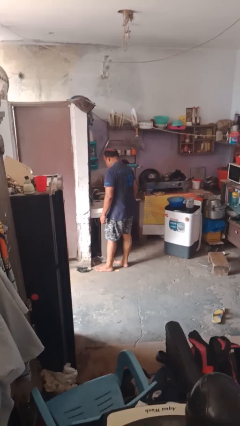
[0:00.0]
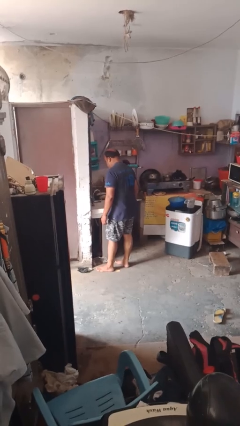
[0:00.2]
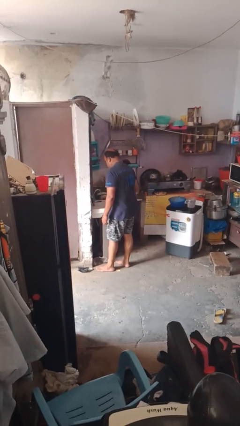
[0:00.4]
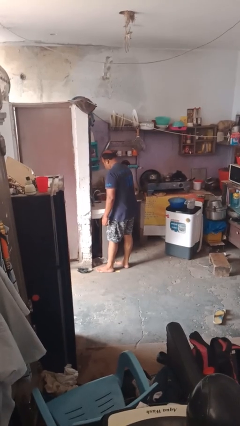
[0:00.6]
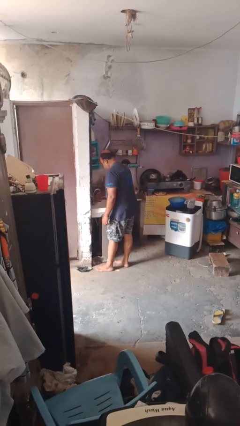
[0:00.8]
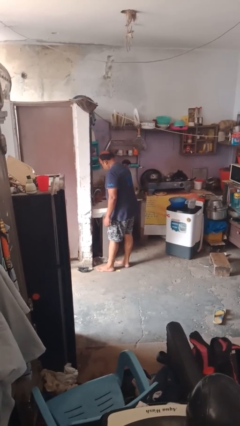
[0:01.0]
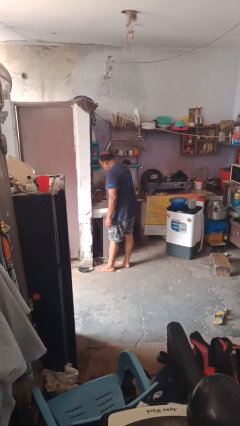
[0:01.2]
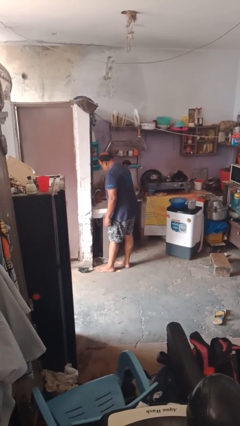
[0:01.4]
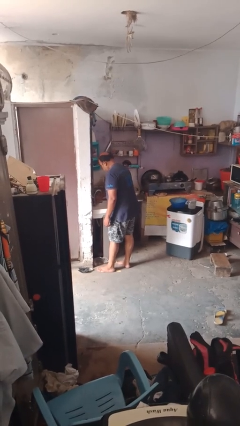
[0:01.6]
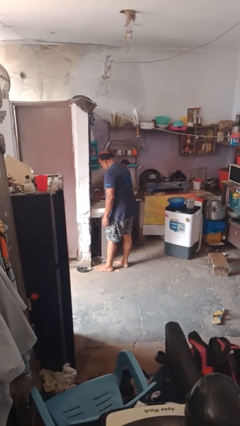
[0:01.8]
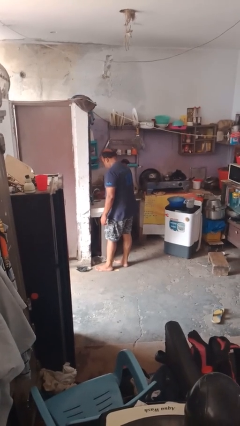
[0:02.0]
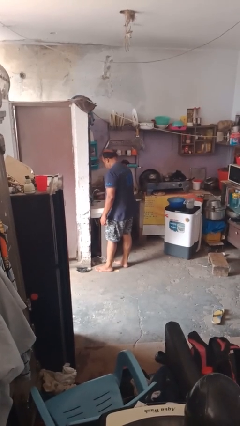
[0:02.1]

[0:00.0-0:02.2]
person turns off faucet

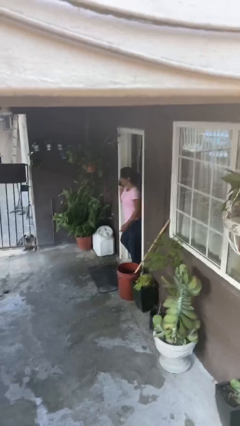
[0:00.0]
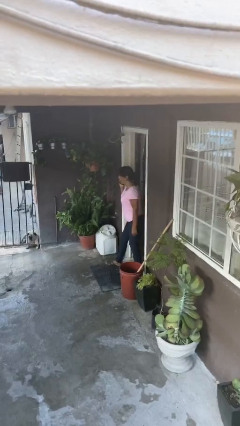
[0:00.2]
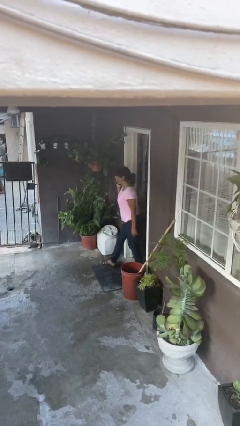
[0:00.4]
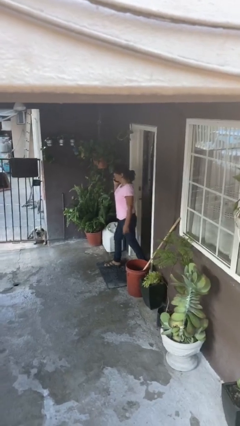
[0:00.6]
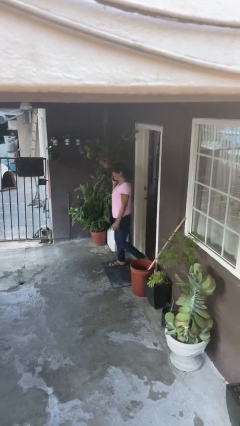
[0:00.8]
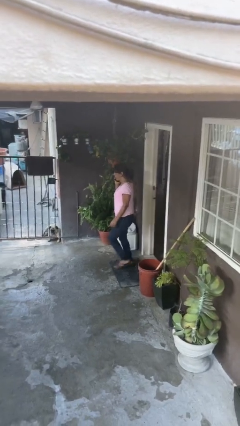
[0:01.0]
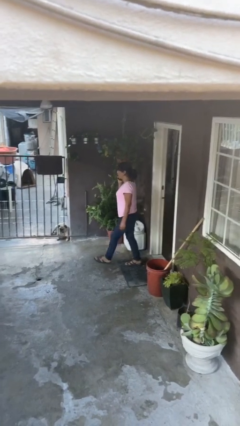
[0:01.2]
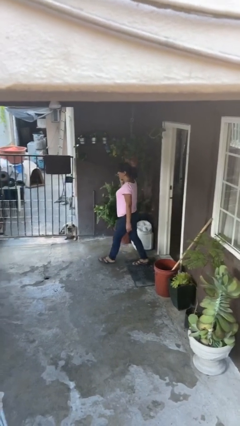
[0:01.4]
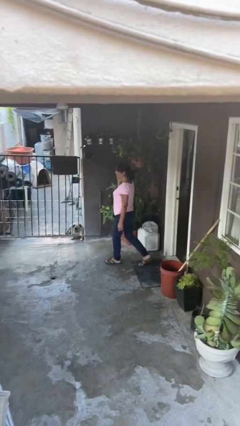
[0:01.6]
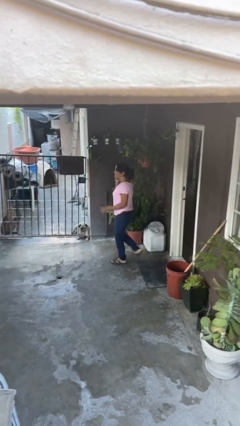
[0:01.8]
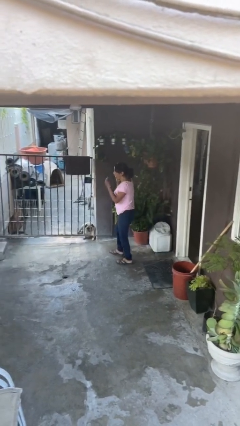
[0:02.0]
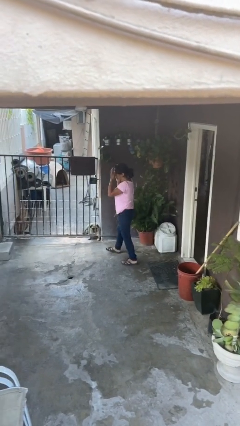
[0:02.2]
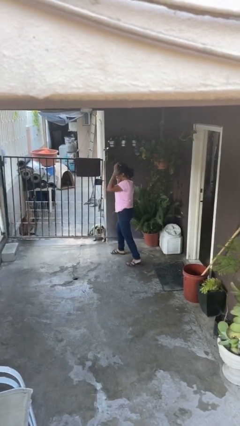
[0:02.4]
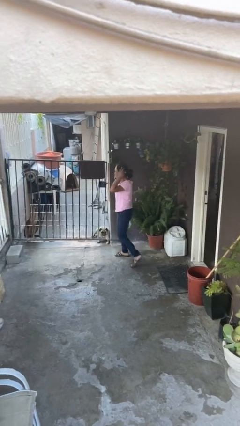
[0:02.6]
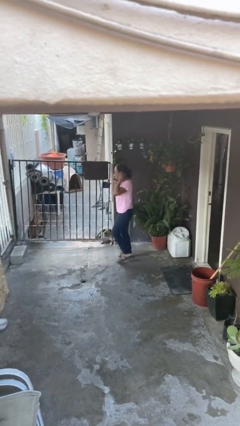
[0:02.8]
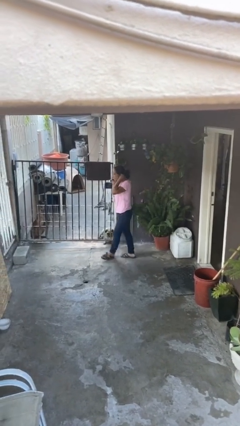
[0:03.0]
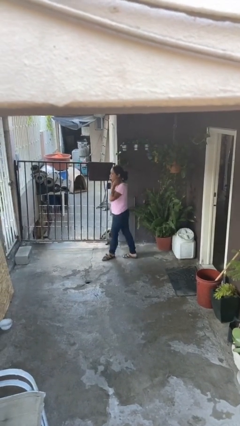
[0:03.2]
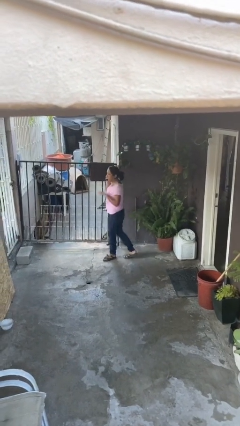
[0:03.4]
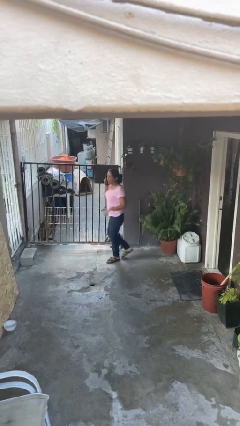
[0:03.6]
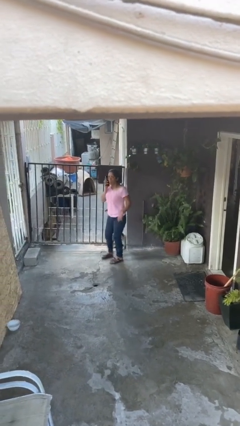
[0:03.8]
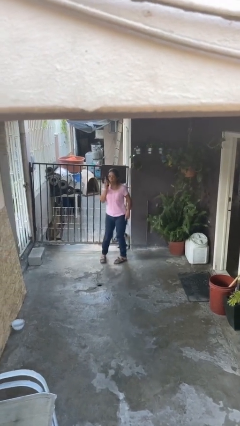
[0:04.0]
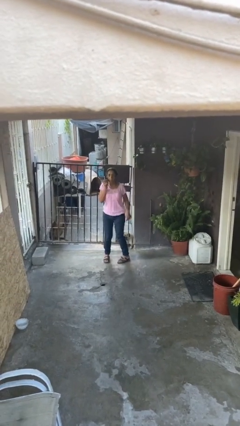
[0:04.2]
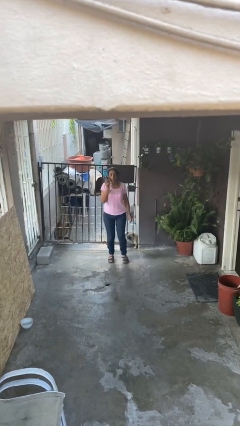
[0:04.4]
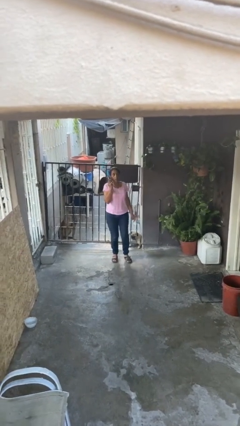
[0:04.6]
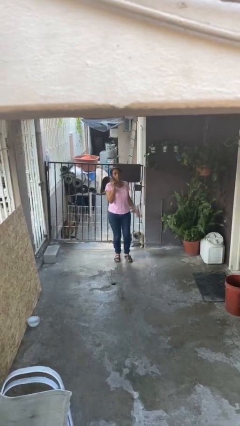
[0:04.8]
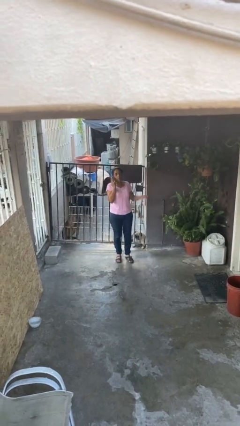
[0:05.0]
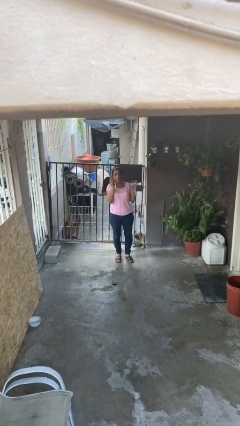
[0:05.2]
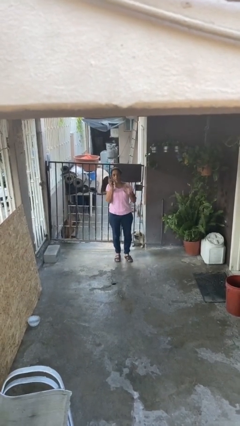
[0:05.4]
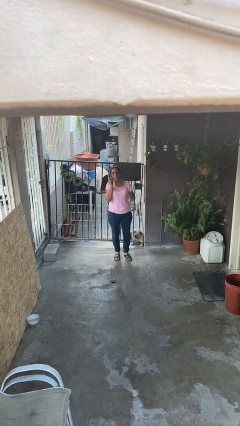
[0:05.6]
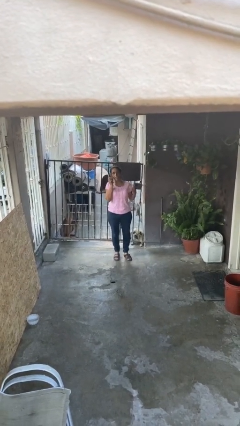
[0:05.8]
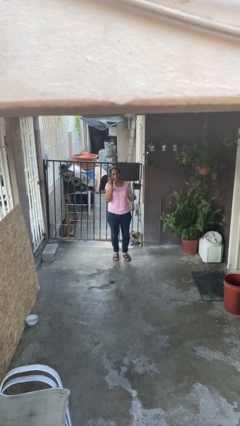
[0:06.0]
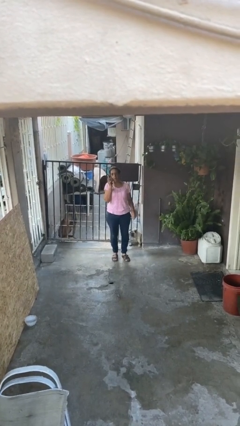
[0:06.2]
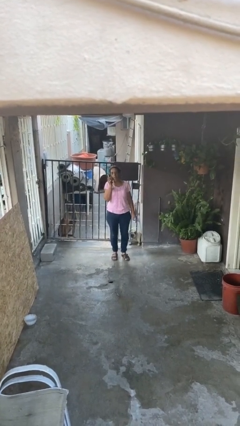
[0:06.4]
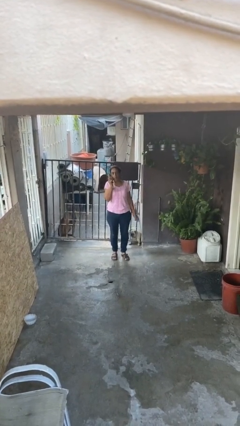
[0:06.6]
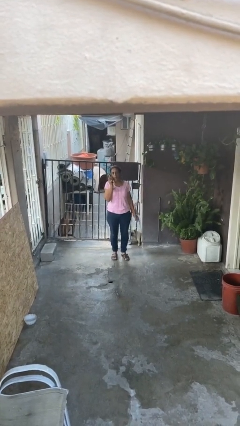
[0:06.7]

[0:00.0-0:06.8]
person enters scene through structure

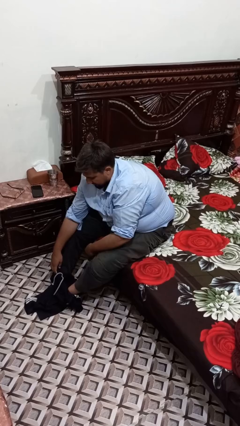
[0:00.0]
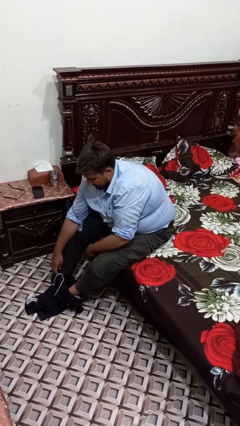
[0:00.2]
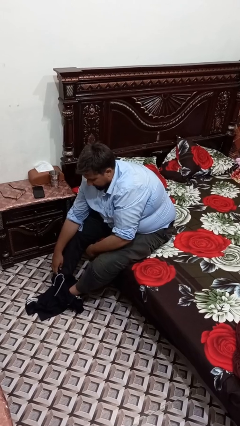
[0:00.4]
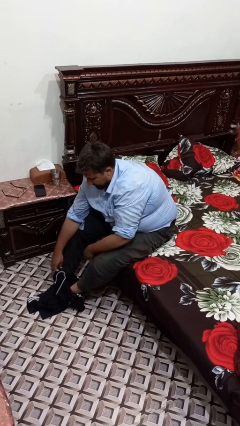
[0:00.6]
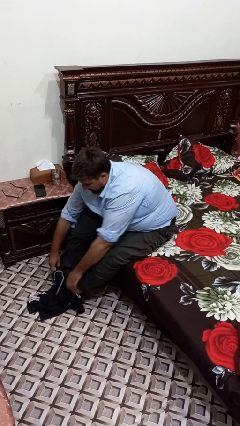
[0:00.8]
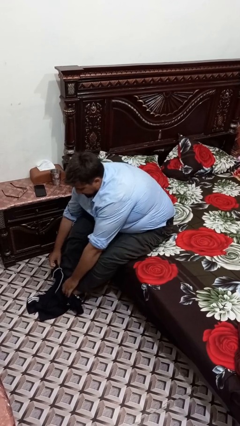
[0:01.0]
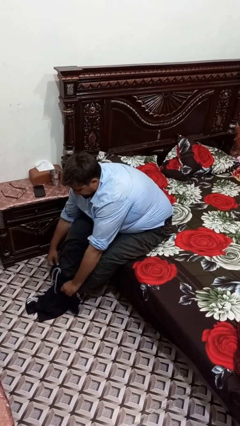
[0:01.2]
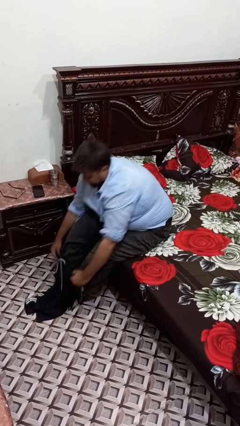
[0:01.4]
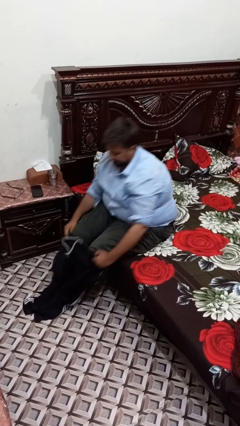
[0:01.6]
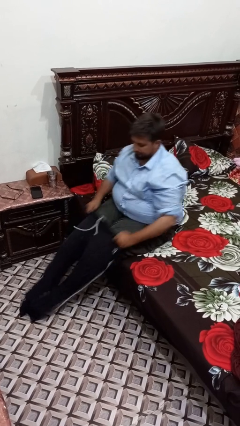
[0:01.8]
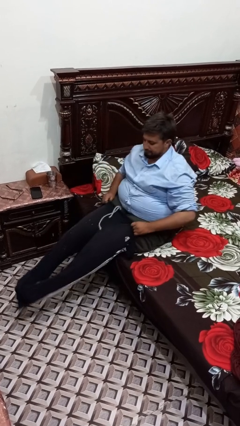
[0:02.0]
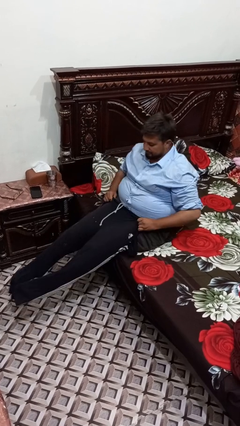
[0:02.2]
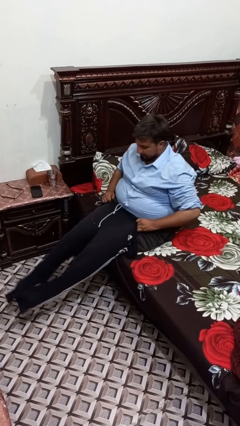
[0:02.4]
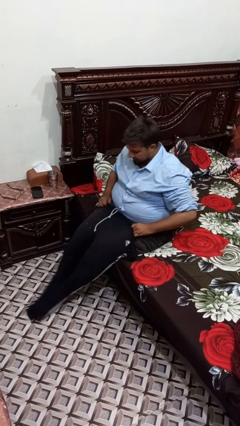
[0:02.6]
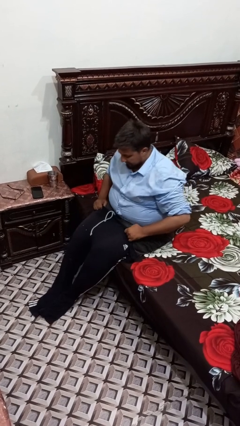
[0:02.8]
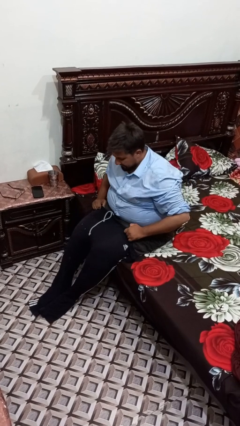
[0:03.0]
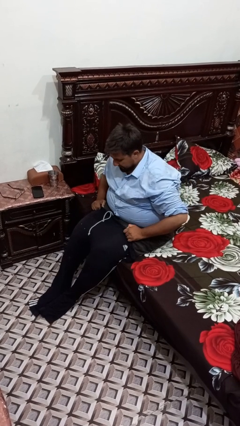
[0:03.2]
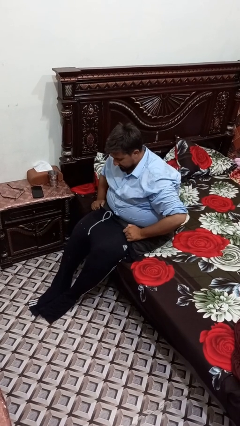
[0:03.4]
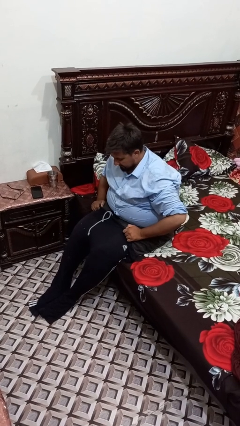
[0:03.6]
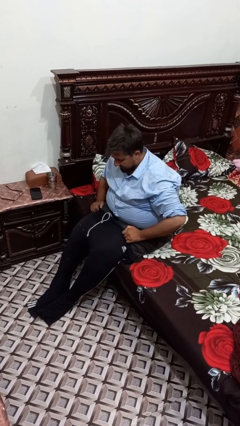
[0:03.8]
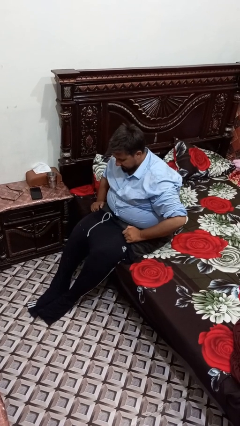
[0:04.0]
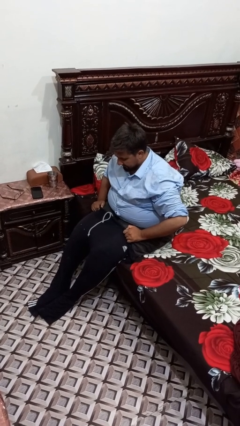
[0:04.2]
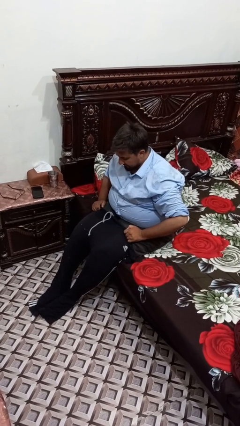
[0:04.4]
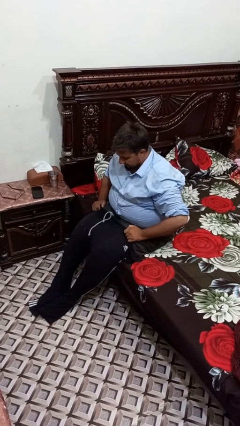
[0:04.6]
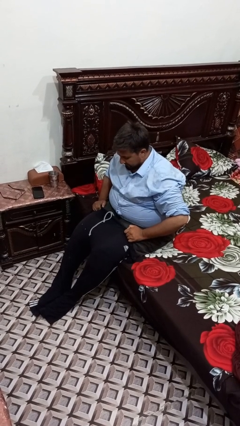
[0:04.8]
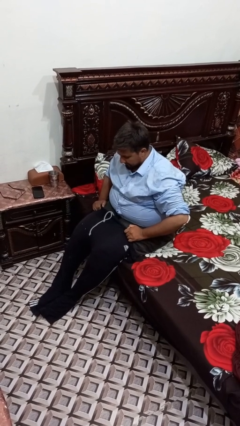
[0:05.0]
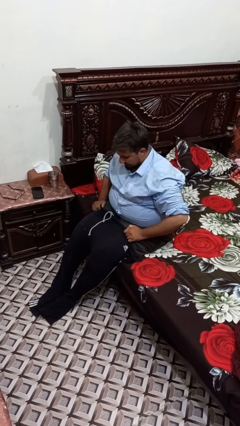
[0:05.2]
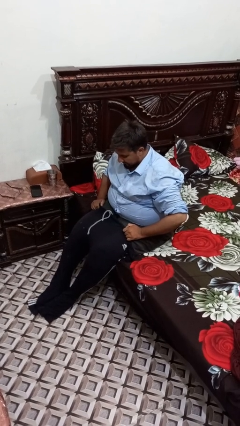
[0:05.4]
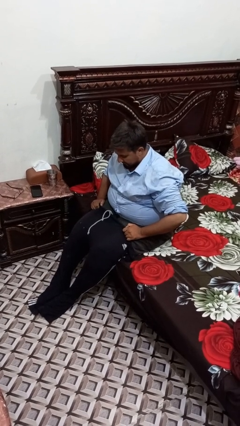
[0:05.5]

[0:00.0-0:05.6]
person puts on pants

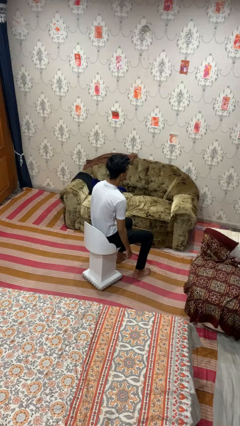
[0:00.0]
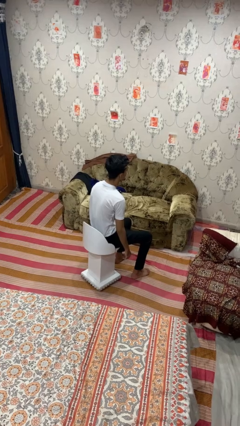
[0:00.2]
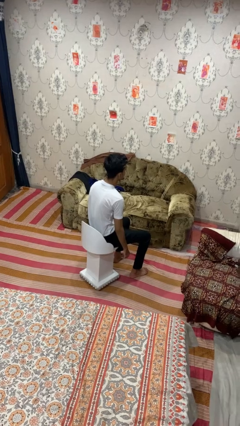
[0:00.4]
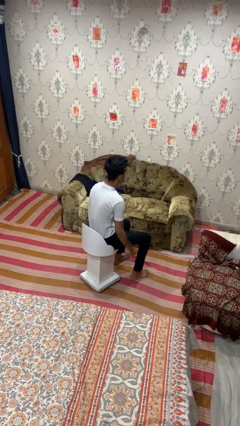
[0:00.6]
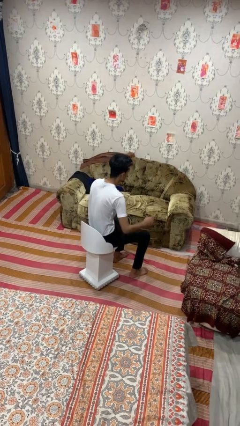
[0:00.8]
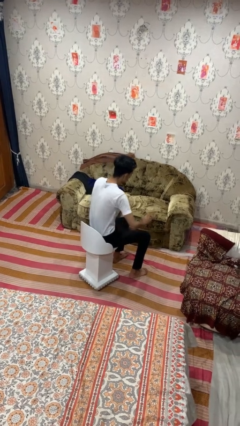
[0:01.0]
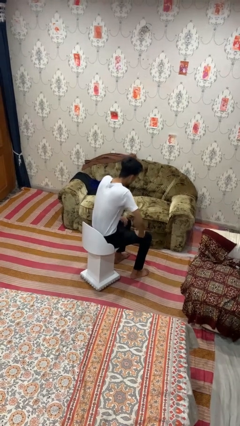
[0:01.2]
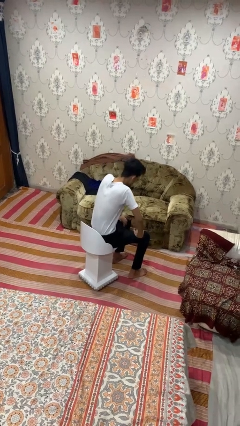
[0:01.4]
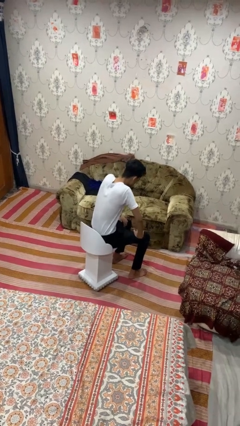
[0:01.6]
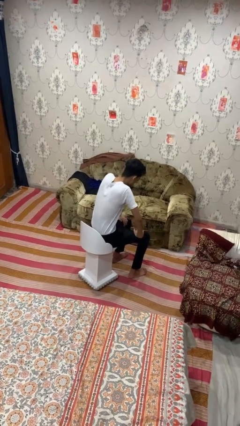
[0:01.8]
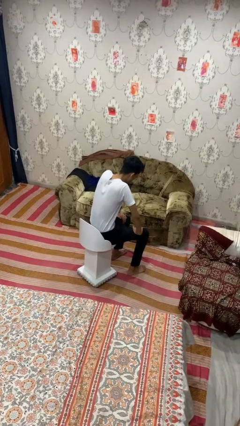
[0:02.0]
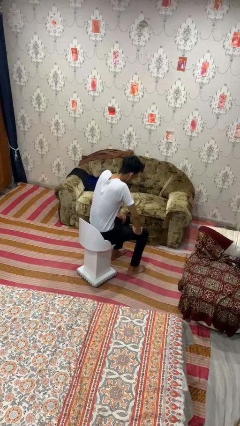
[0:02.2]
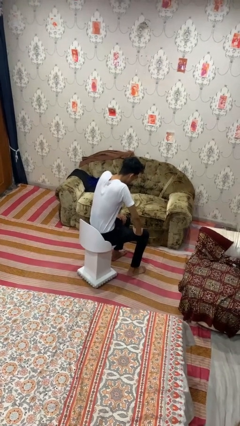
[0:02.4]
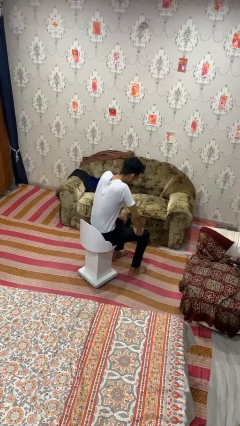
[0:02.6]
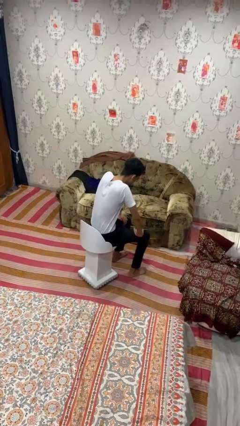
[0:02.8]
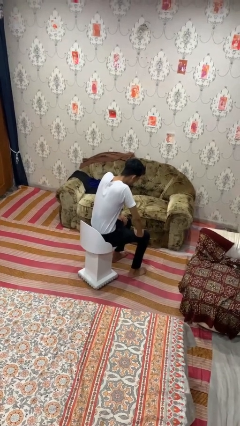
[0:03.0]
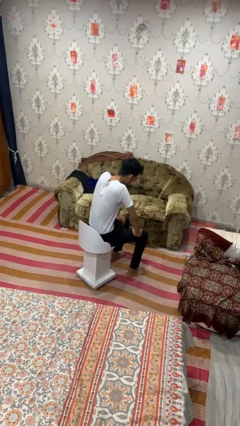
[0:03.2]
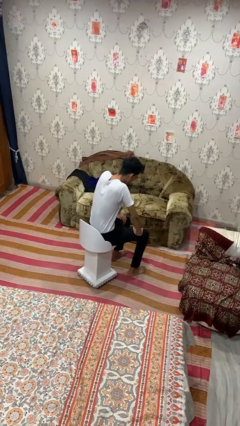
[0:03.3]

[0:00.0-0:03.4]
person slaps hands on thighs
